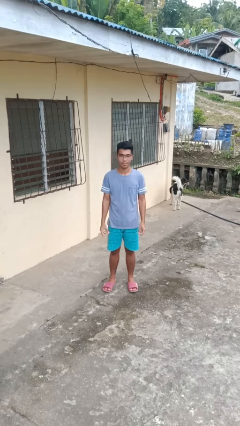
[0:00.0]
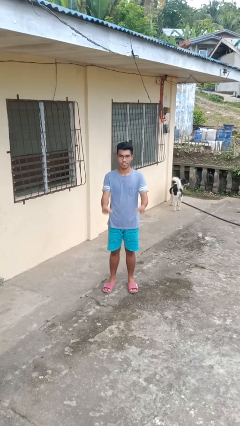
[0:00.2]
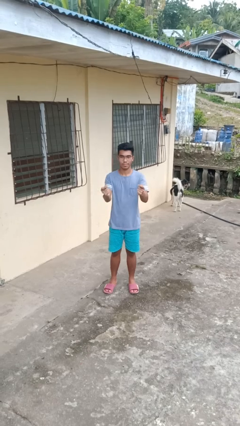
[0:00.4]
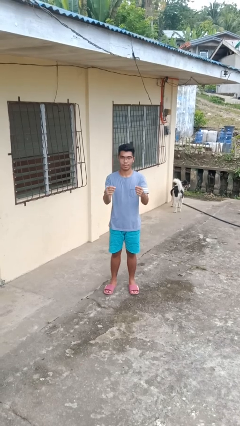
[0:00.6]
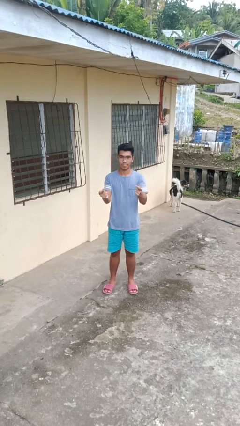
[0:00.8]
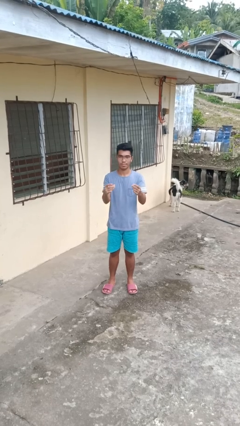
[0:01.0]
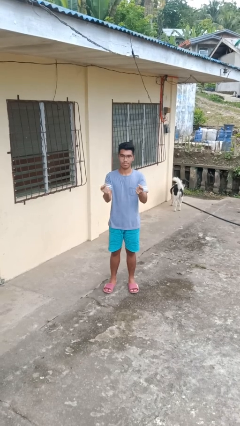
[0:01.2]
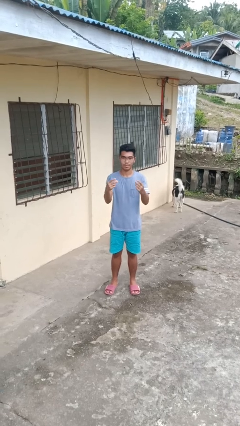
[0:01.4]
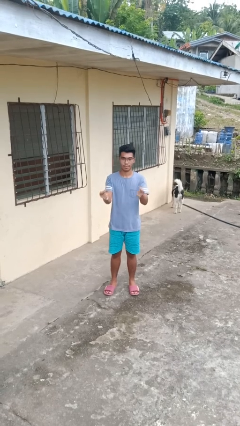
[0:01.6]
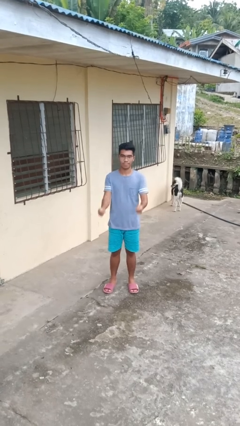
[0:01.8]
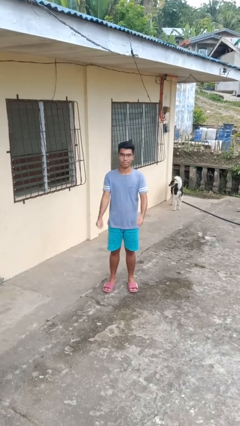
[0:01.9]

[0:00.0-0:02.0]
person snaps fingers

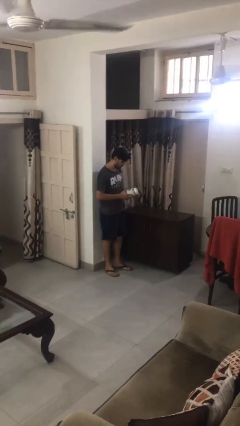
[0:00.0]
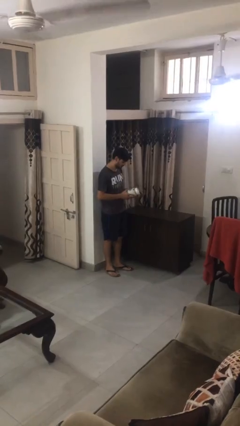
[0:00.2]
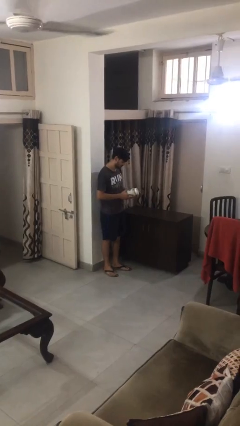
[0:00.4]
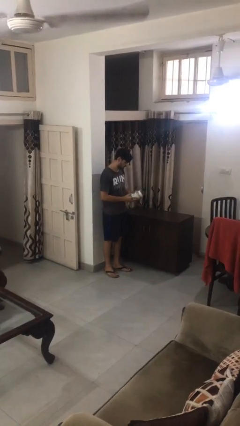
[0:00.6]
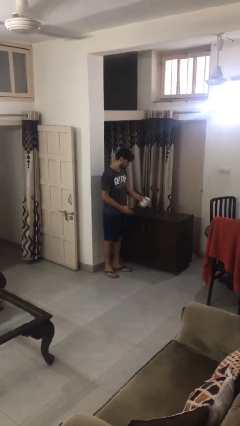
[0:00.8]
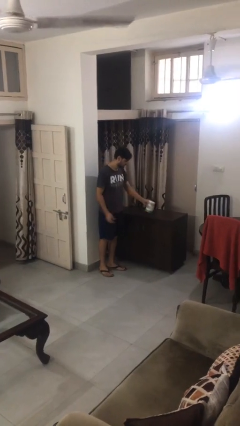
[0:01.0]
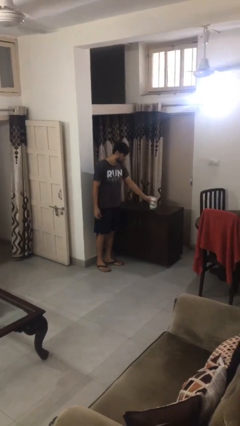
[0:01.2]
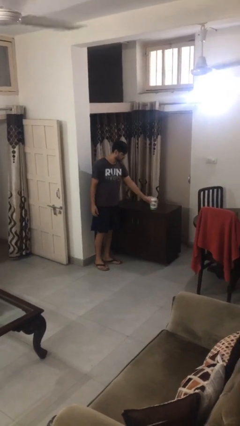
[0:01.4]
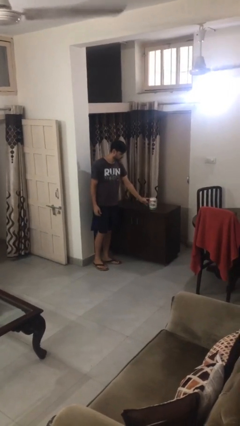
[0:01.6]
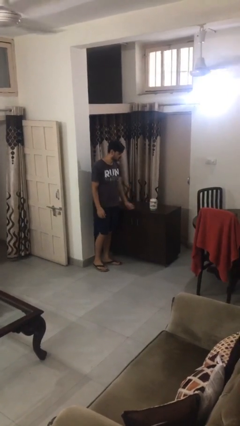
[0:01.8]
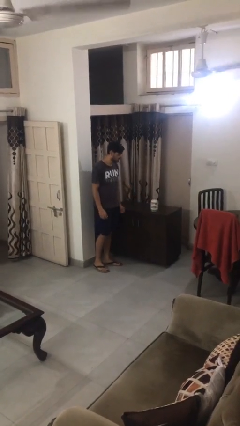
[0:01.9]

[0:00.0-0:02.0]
person puts down object on countertop

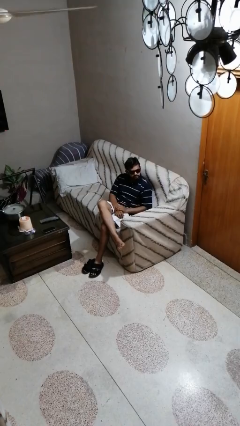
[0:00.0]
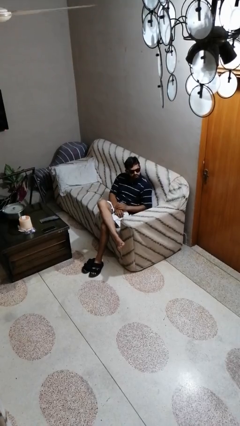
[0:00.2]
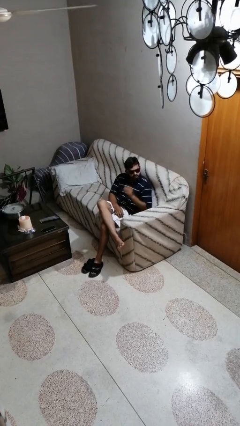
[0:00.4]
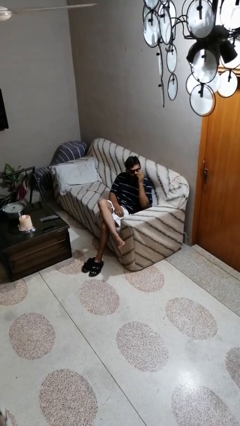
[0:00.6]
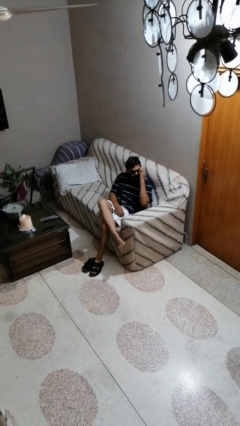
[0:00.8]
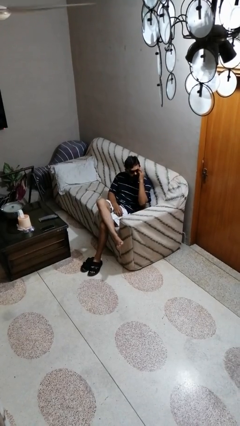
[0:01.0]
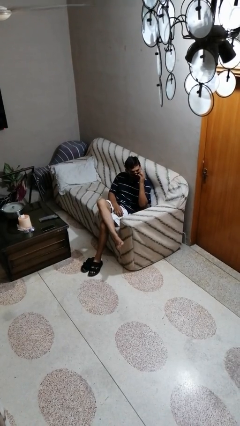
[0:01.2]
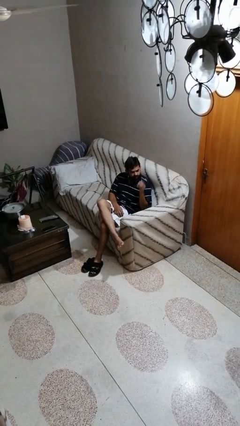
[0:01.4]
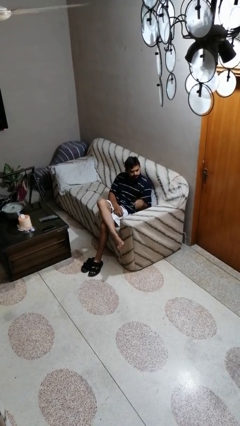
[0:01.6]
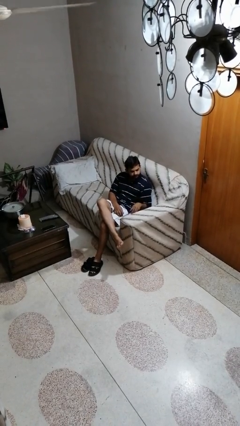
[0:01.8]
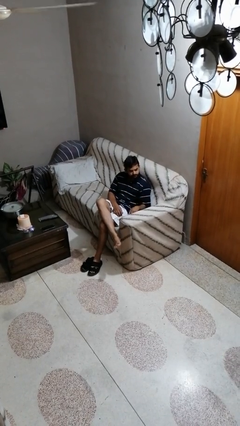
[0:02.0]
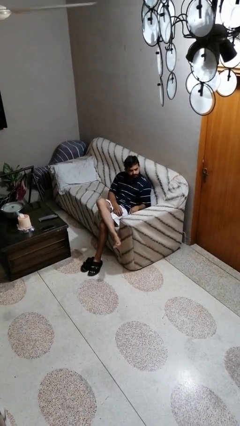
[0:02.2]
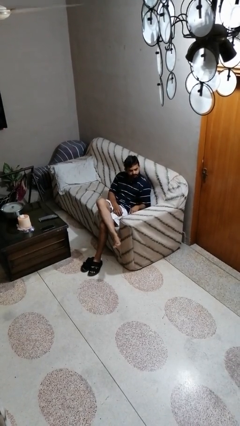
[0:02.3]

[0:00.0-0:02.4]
person takes off sunglasses

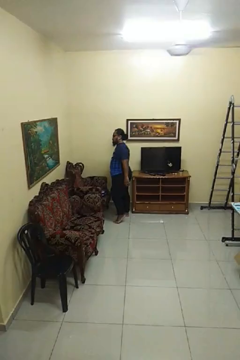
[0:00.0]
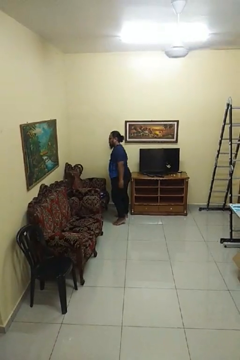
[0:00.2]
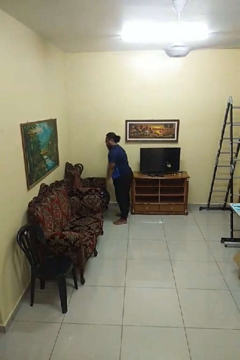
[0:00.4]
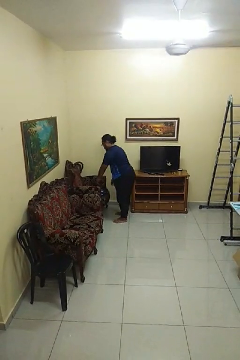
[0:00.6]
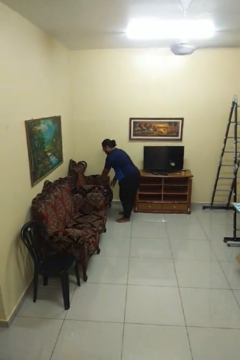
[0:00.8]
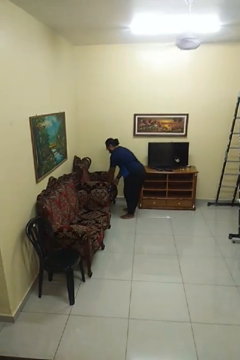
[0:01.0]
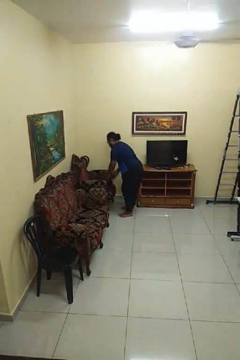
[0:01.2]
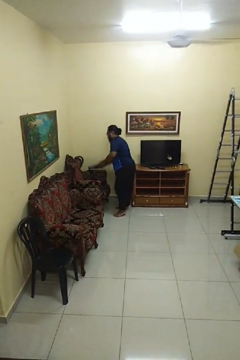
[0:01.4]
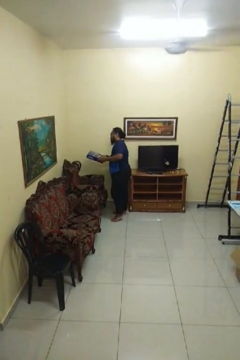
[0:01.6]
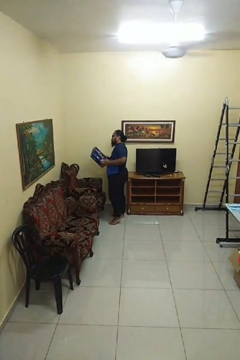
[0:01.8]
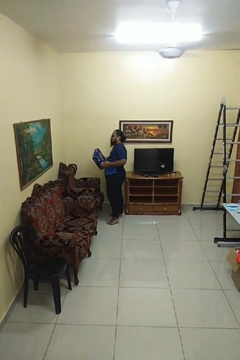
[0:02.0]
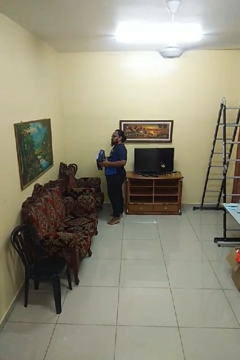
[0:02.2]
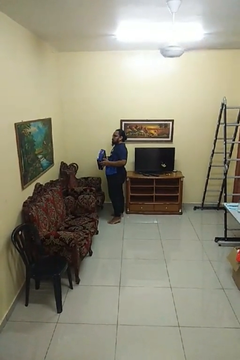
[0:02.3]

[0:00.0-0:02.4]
person picks up object from couch

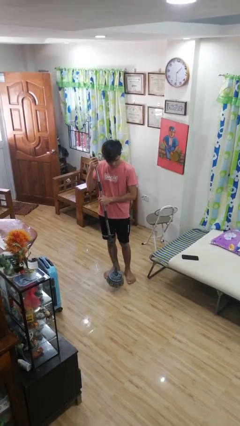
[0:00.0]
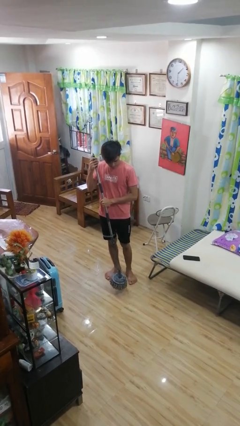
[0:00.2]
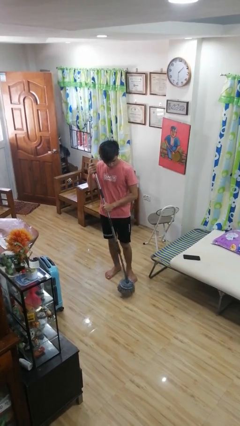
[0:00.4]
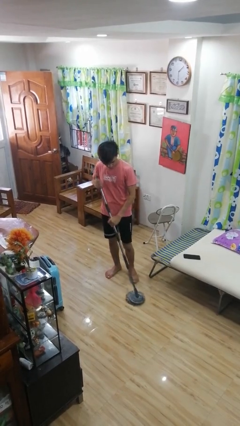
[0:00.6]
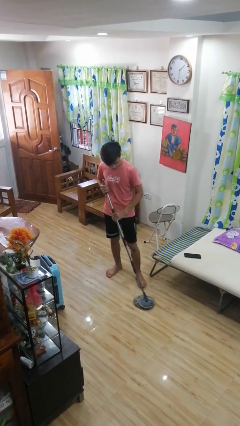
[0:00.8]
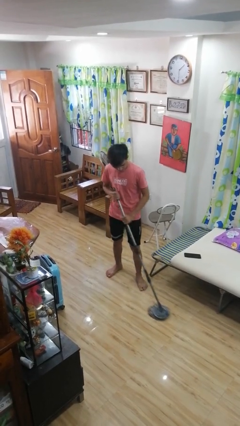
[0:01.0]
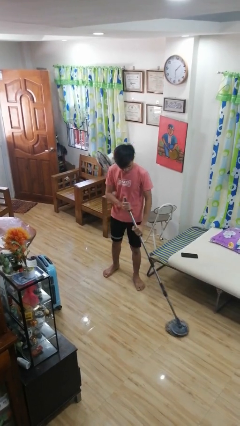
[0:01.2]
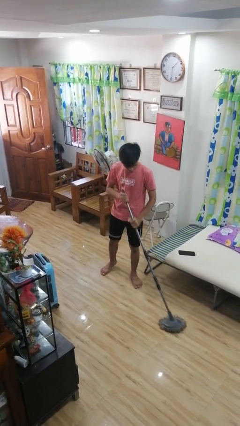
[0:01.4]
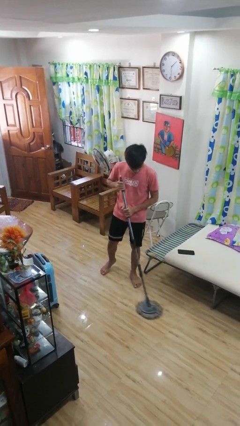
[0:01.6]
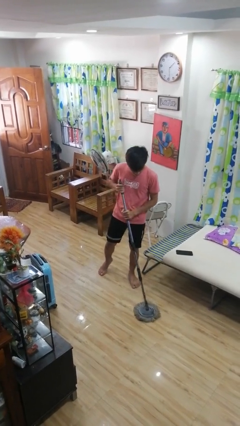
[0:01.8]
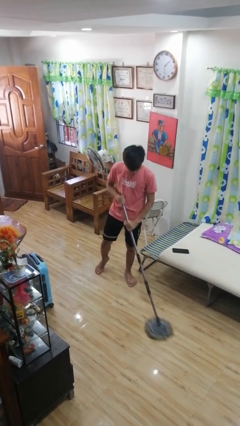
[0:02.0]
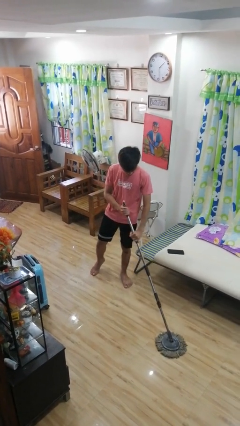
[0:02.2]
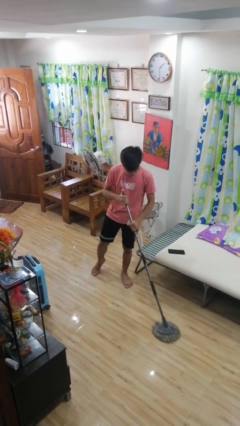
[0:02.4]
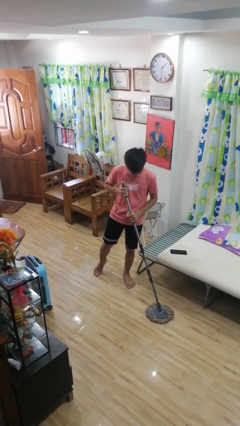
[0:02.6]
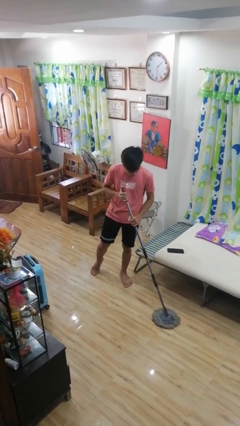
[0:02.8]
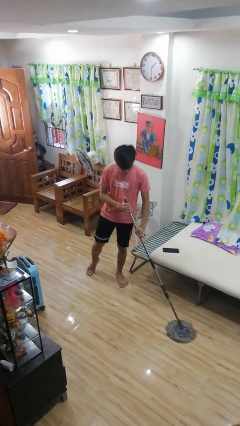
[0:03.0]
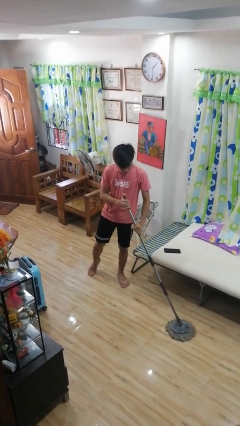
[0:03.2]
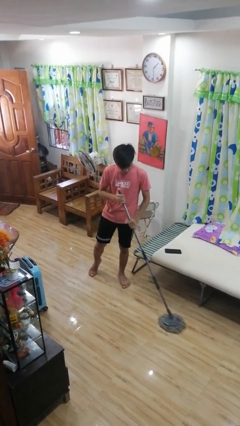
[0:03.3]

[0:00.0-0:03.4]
person mops

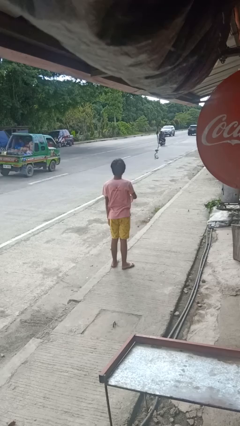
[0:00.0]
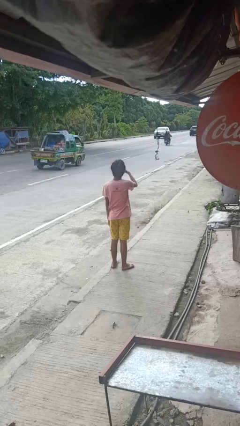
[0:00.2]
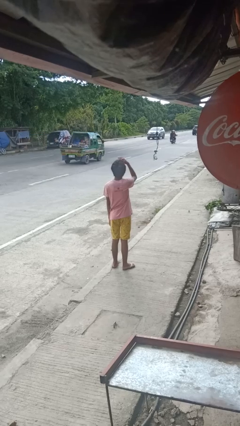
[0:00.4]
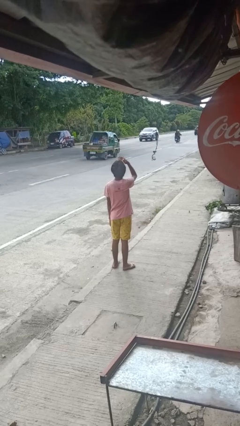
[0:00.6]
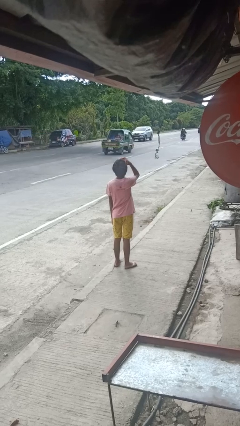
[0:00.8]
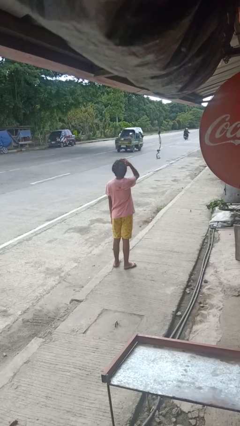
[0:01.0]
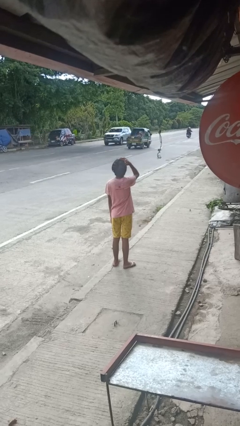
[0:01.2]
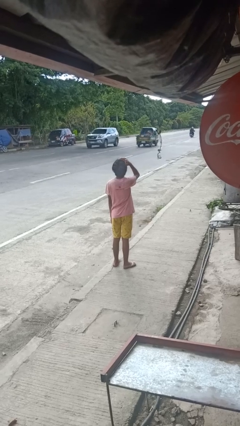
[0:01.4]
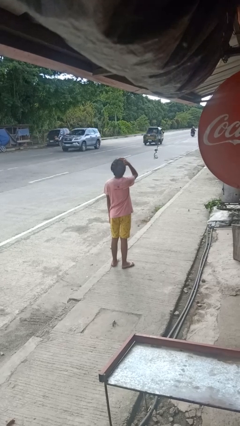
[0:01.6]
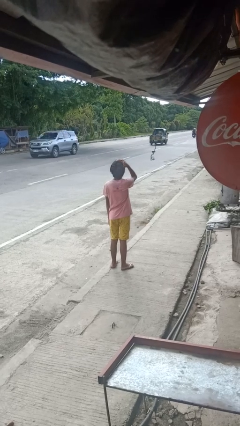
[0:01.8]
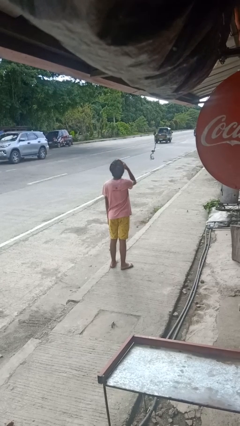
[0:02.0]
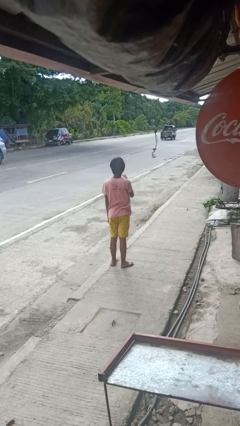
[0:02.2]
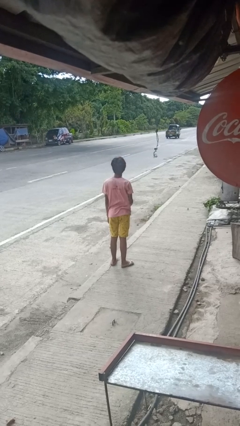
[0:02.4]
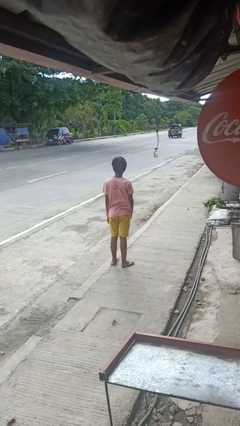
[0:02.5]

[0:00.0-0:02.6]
person shades eyes

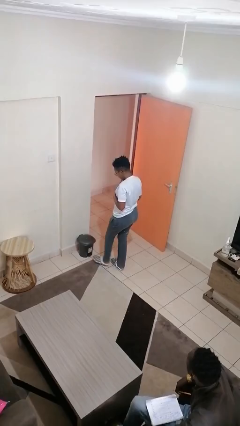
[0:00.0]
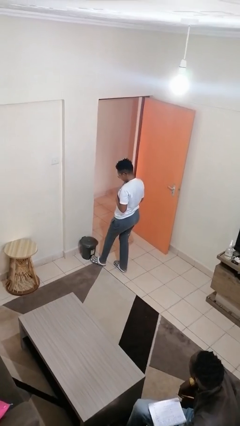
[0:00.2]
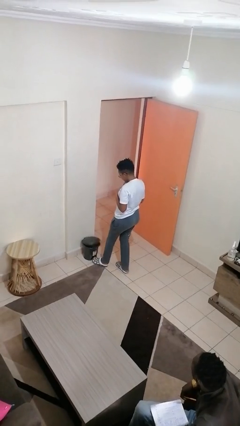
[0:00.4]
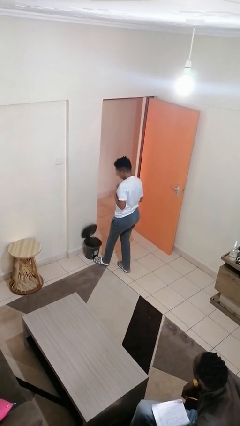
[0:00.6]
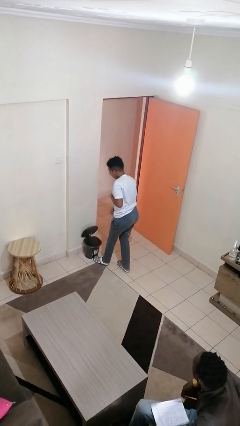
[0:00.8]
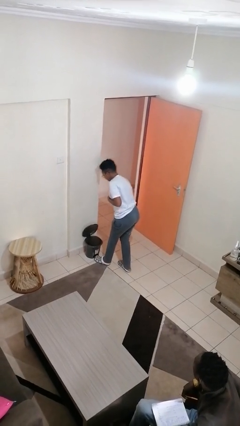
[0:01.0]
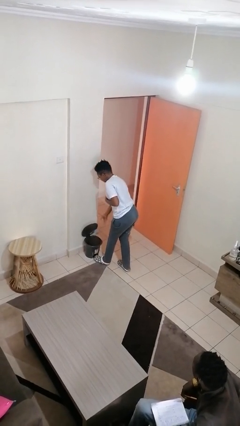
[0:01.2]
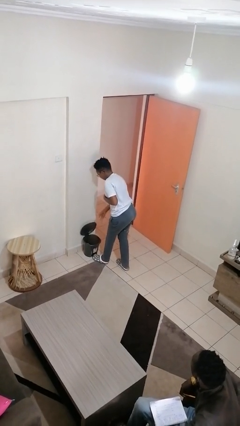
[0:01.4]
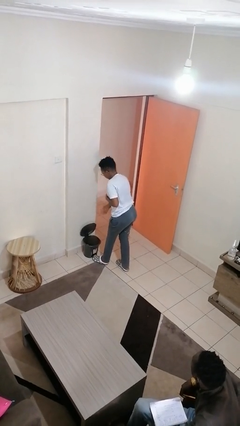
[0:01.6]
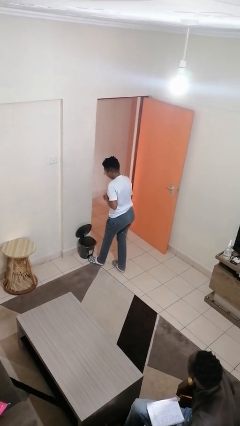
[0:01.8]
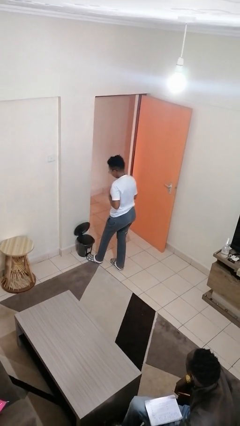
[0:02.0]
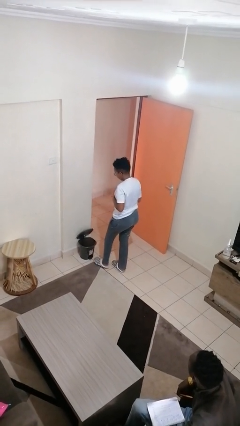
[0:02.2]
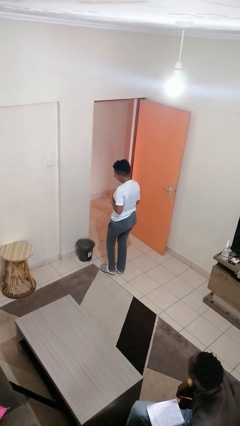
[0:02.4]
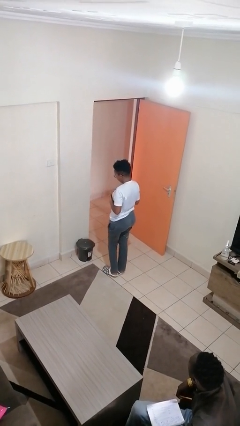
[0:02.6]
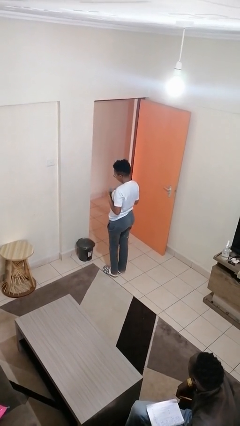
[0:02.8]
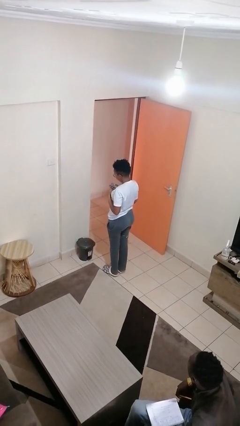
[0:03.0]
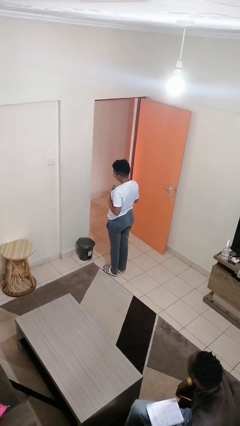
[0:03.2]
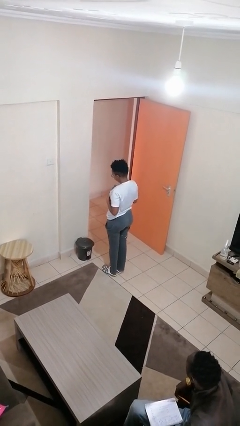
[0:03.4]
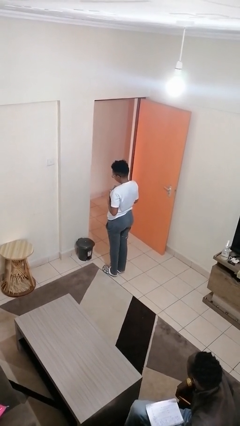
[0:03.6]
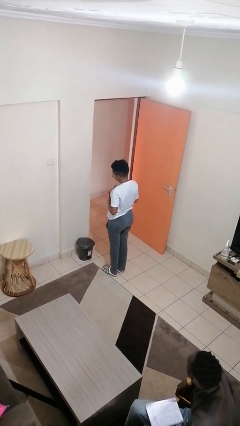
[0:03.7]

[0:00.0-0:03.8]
person discards trash
